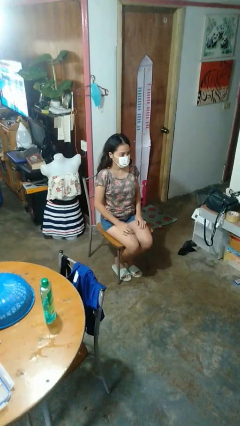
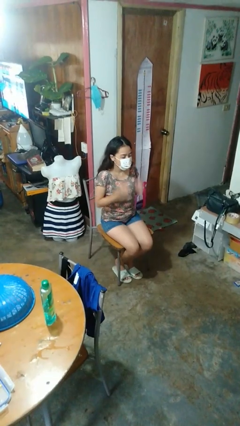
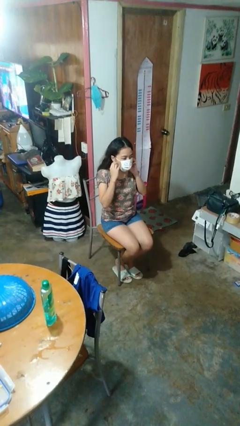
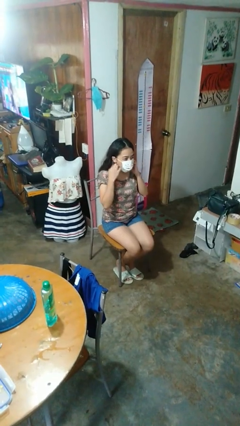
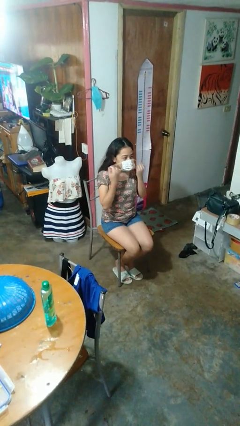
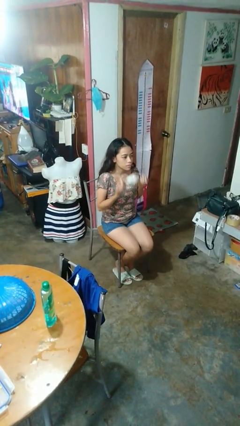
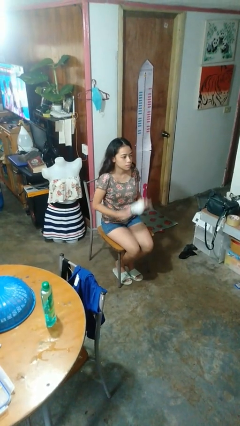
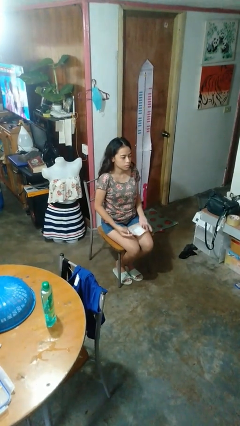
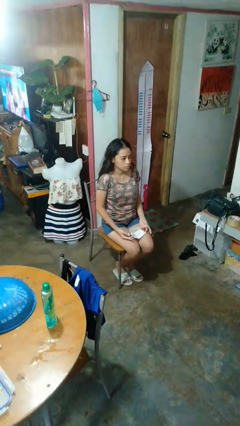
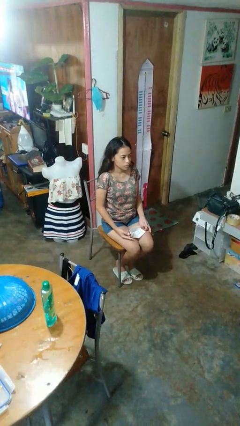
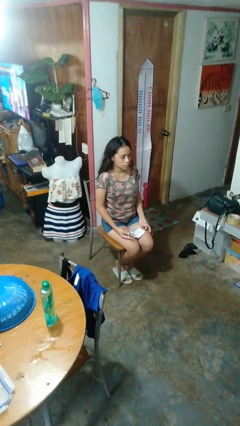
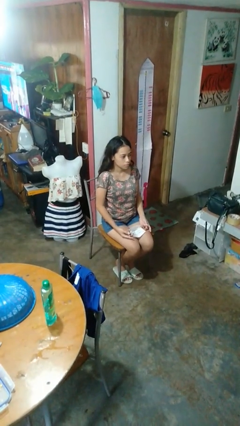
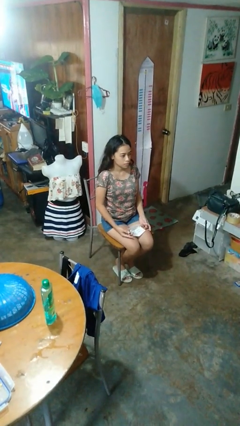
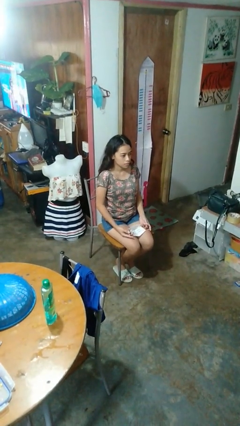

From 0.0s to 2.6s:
person opens mailbox

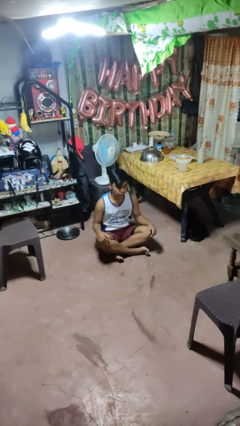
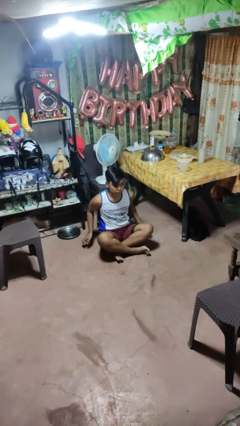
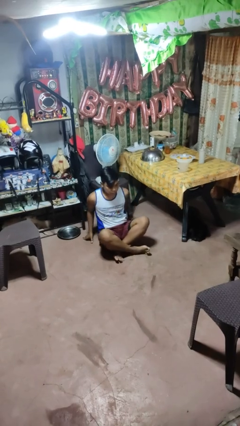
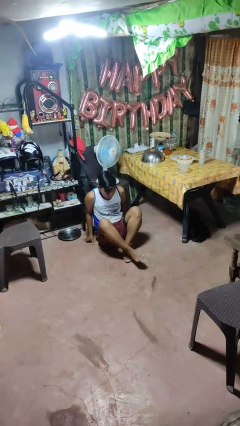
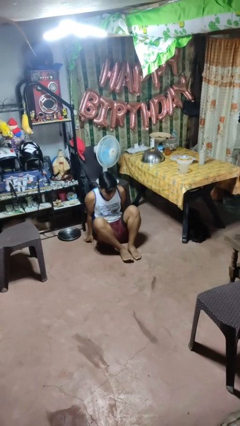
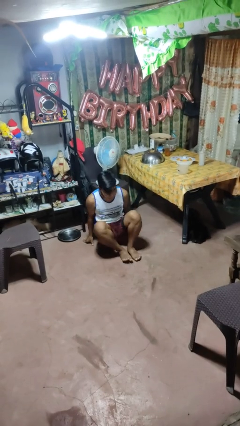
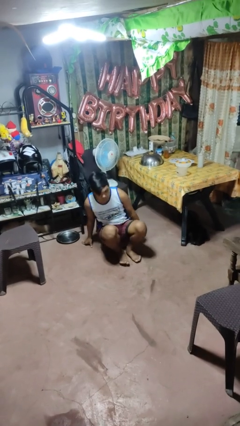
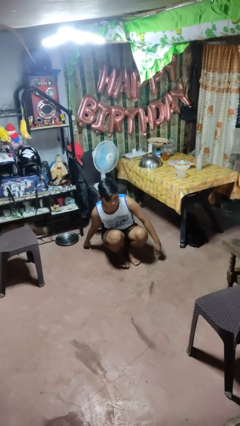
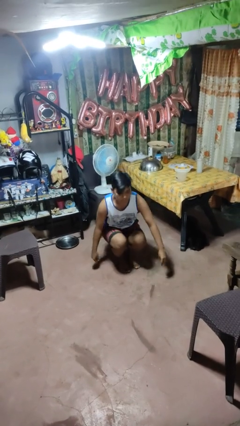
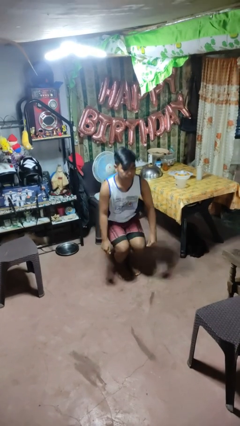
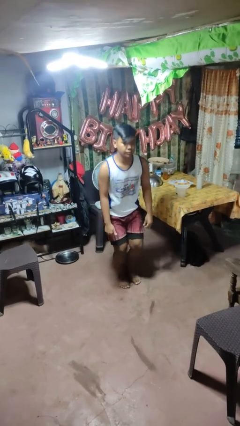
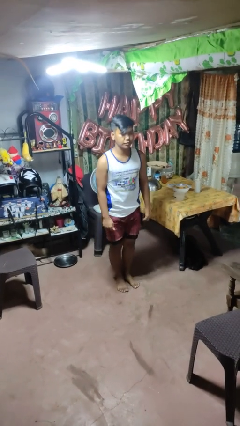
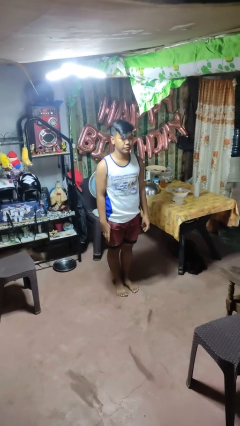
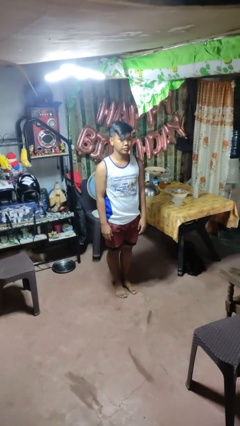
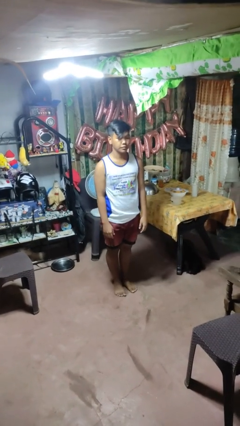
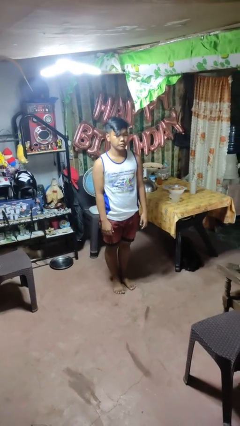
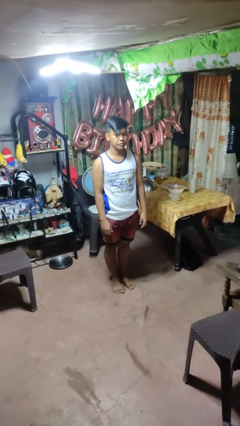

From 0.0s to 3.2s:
person stands up from floor

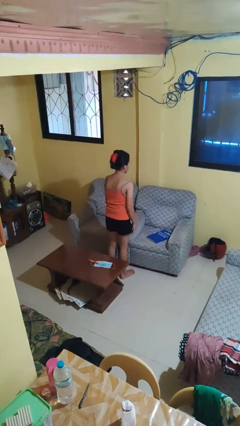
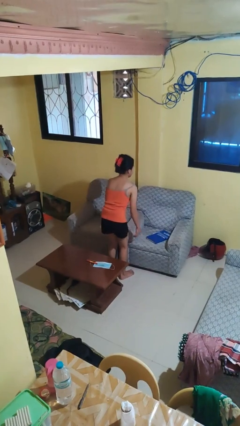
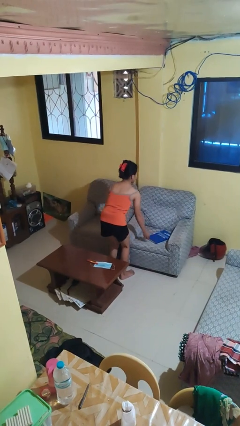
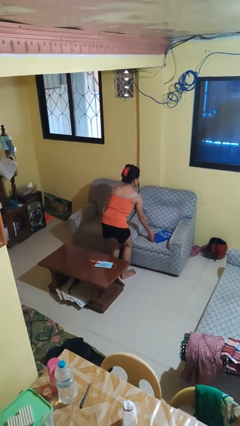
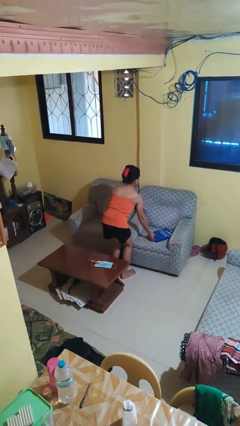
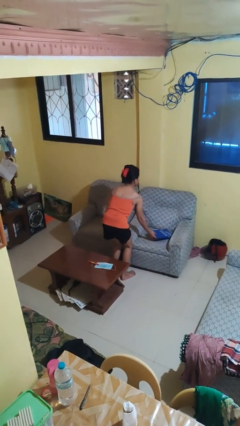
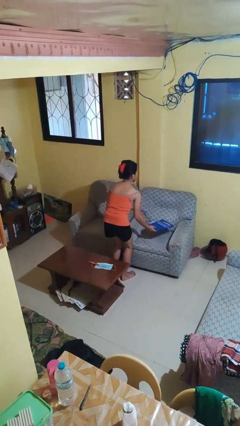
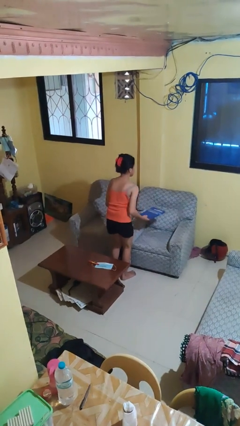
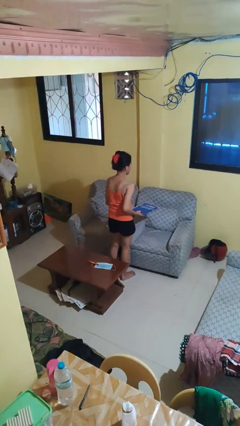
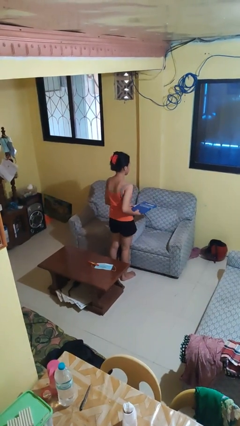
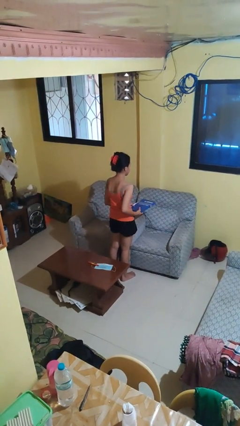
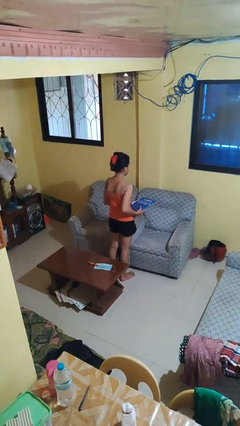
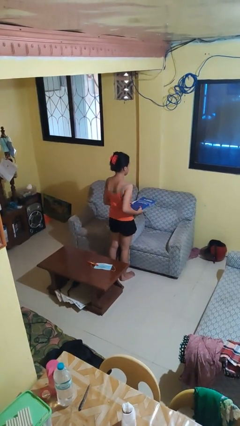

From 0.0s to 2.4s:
person picks up object from couch

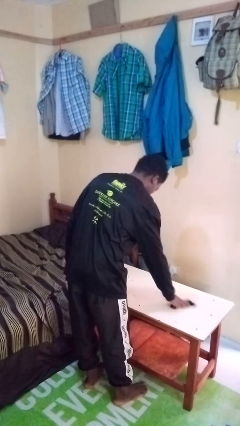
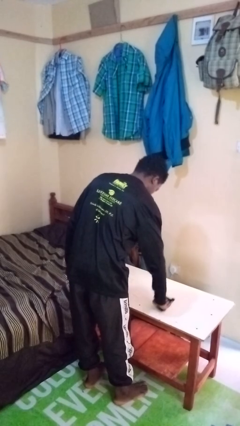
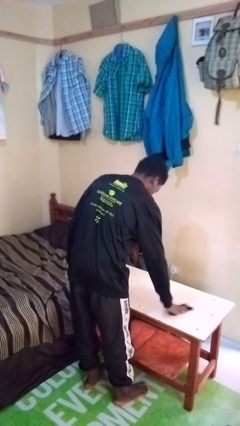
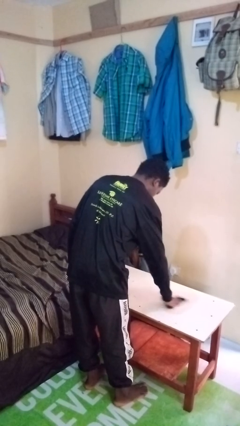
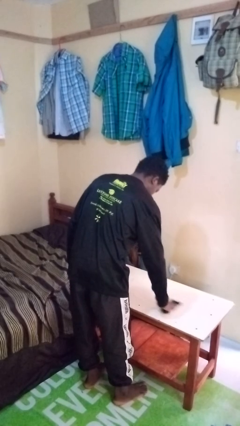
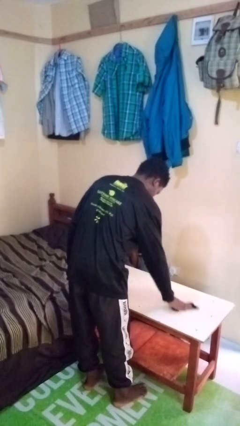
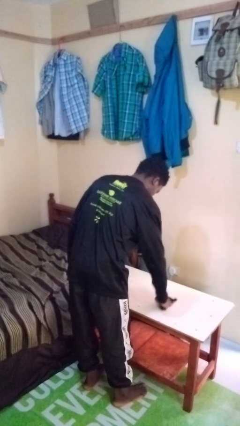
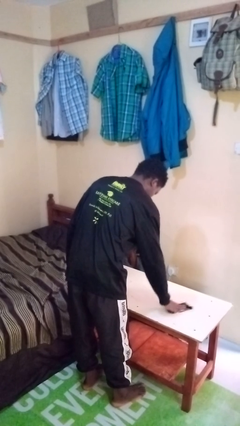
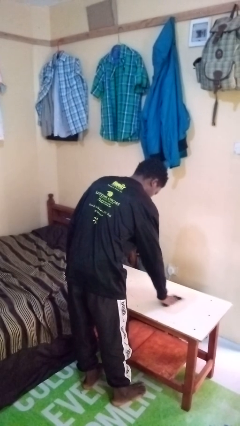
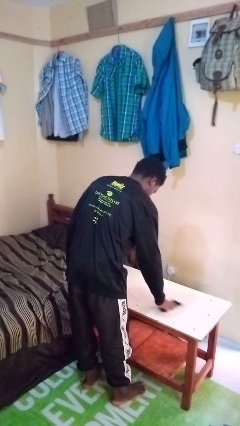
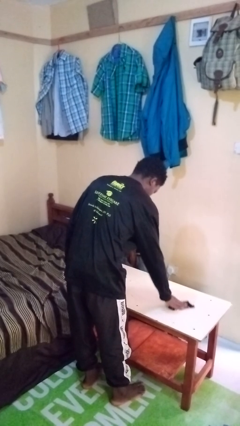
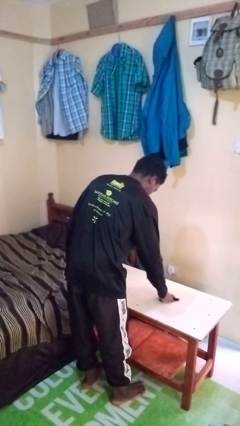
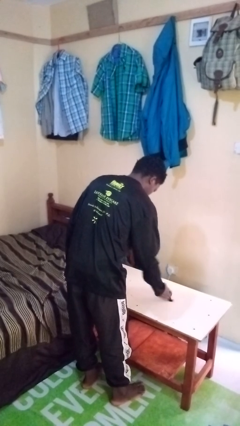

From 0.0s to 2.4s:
person cleans table with rag

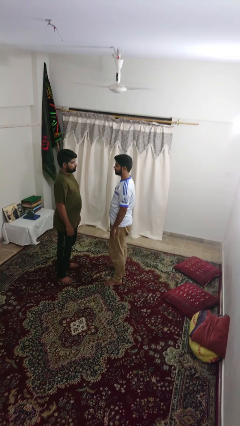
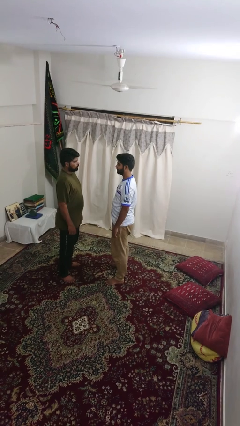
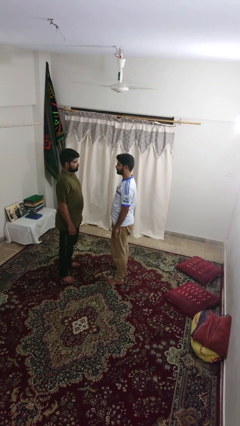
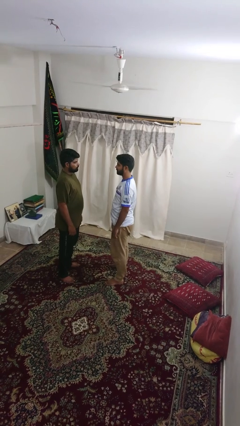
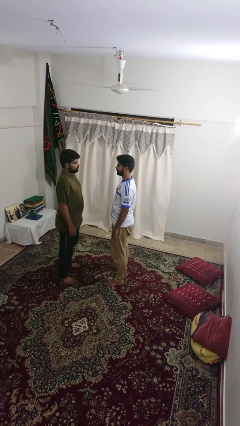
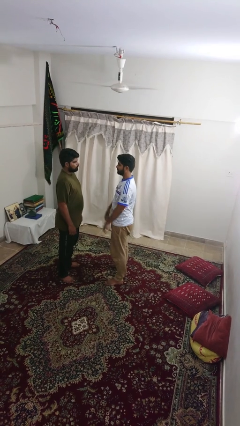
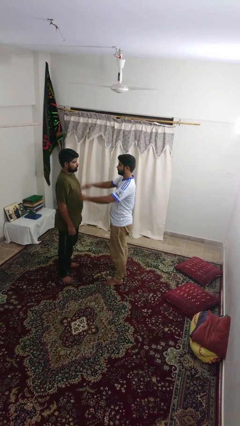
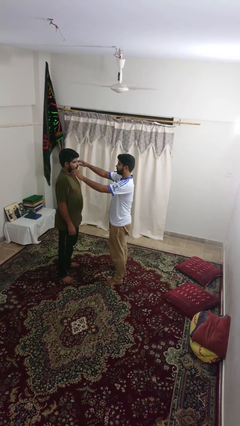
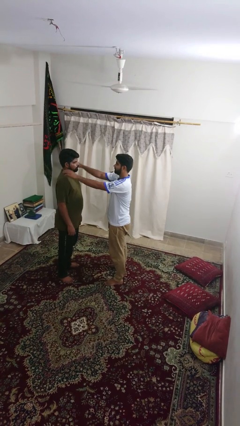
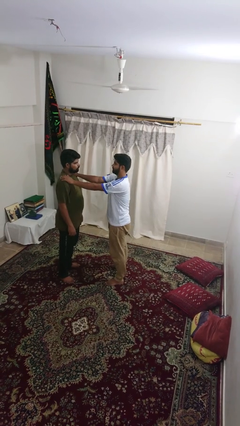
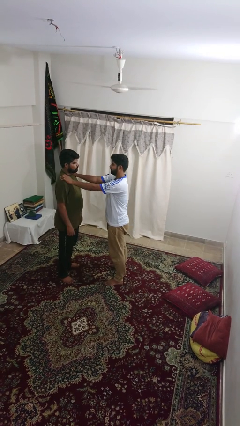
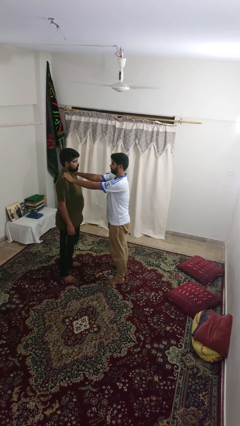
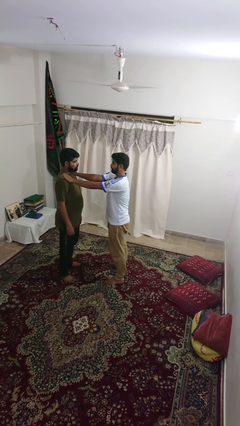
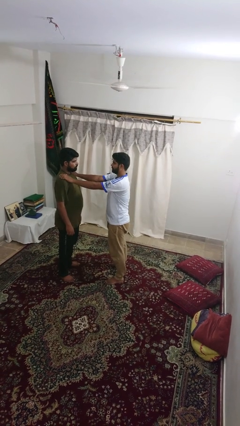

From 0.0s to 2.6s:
person pounds shoulders of person

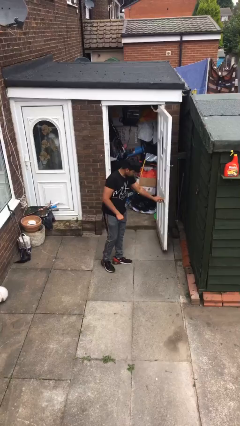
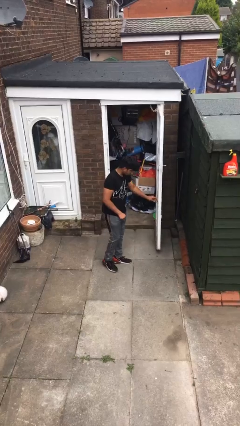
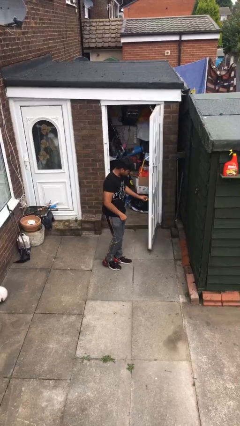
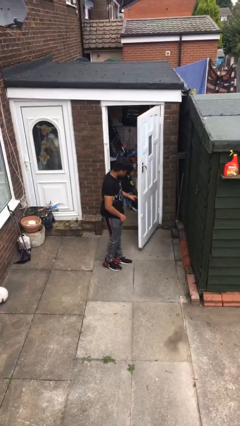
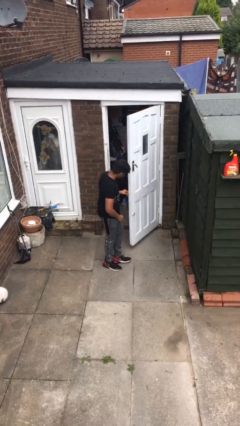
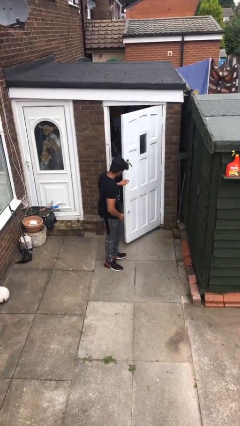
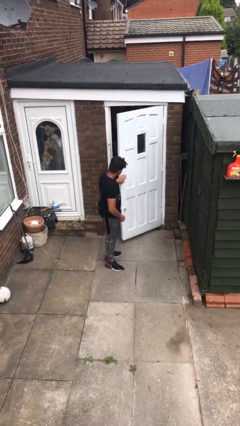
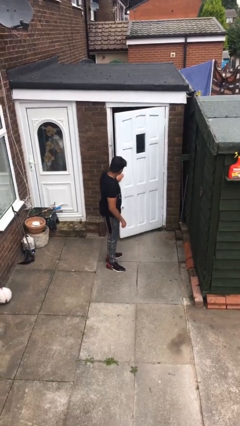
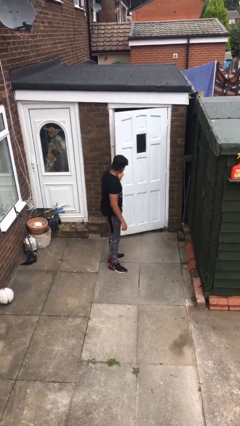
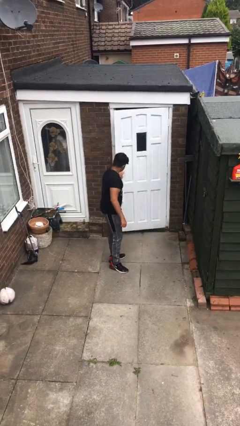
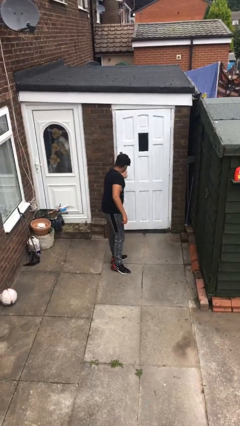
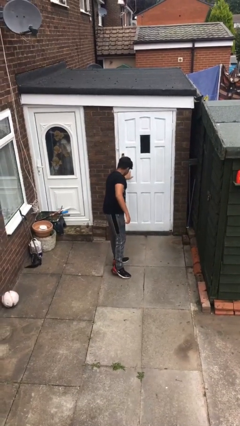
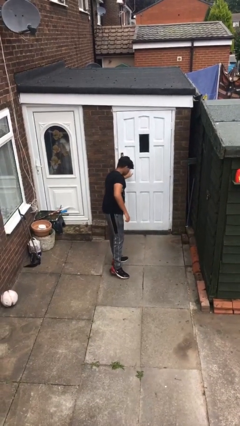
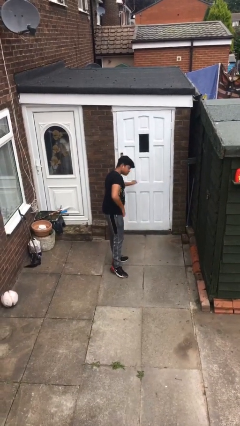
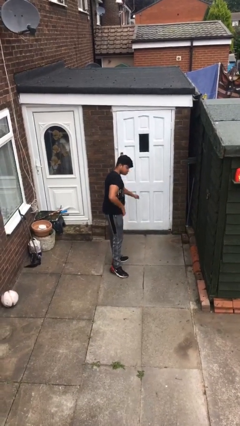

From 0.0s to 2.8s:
person closes facility door

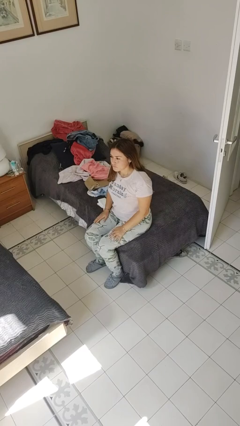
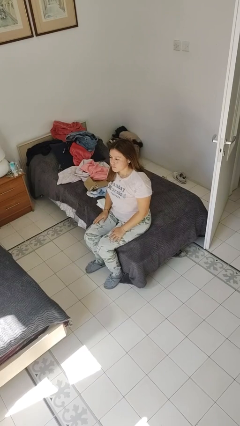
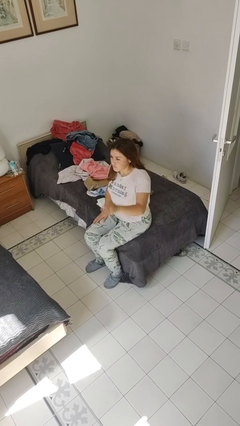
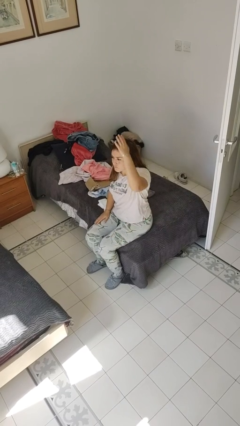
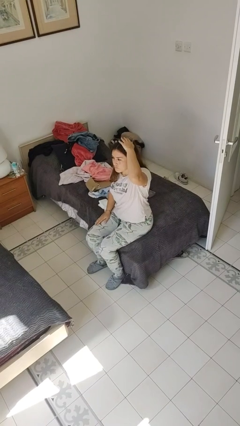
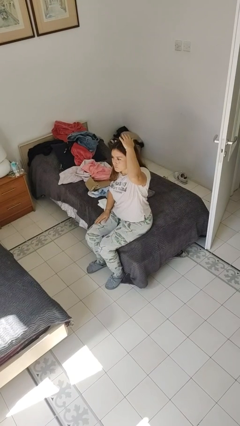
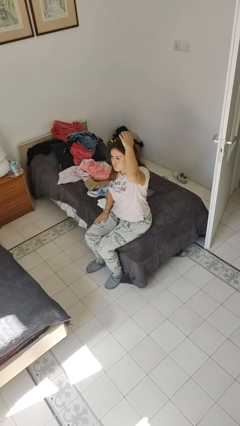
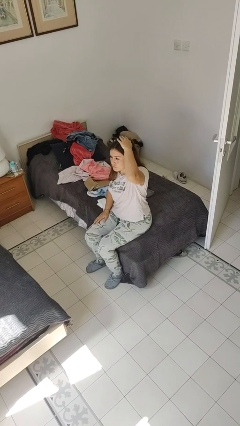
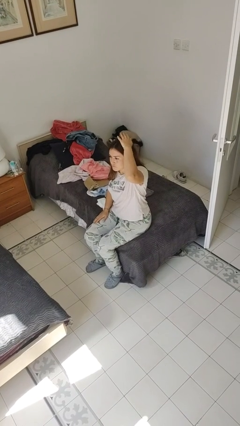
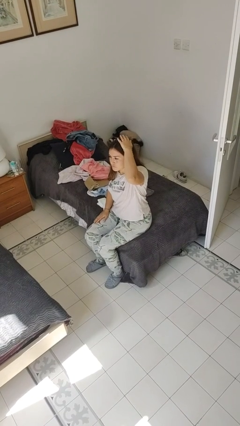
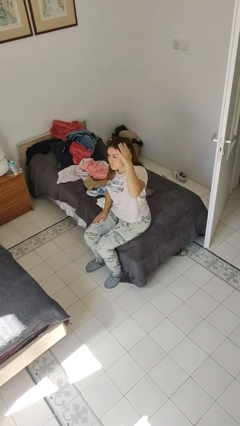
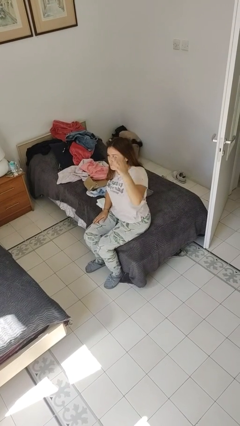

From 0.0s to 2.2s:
person pats head
